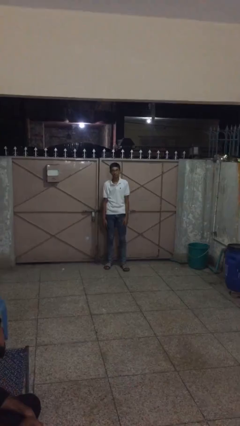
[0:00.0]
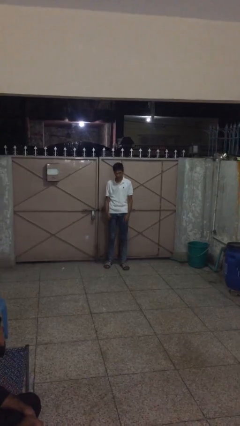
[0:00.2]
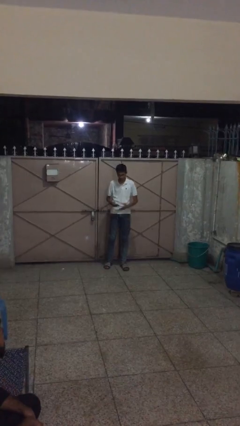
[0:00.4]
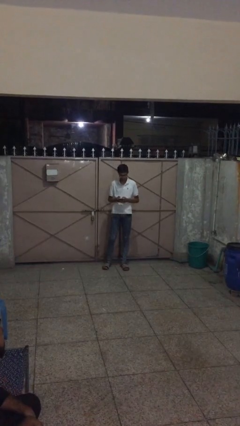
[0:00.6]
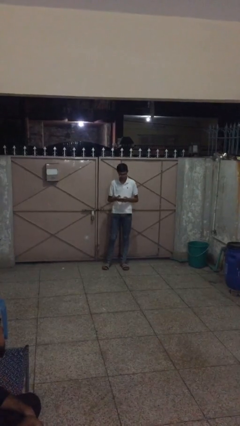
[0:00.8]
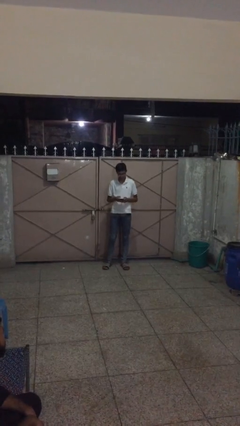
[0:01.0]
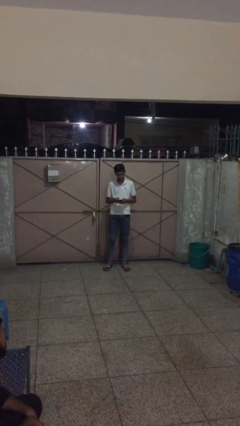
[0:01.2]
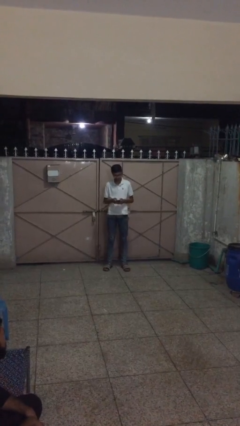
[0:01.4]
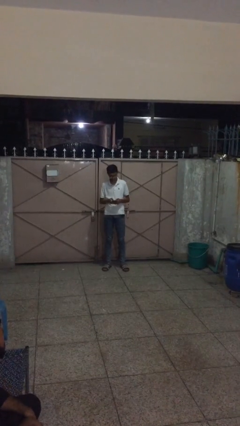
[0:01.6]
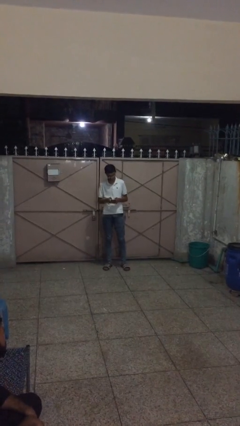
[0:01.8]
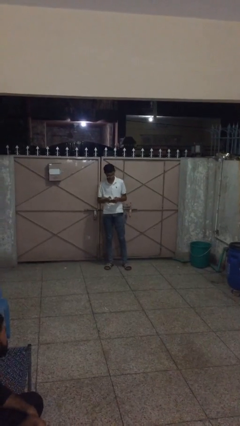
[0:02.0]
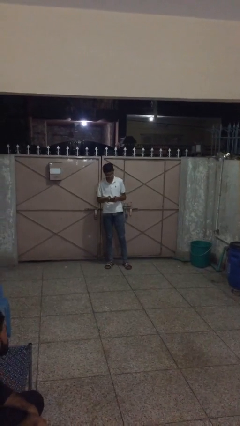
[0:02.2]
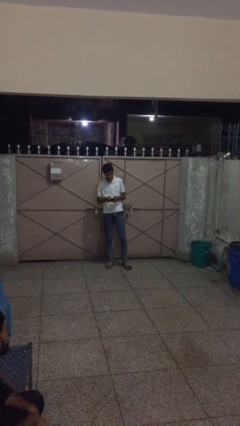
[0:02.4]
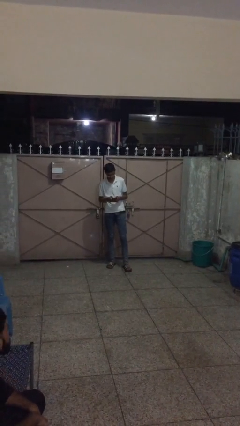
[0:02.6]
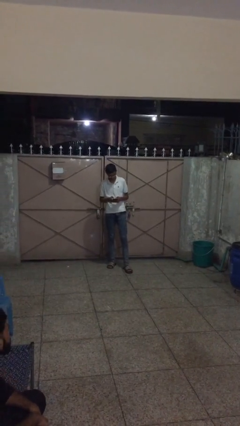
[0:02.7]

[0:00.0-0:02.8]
person texts on phone

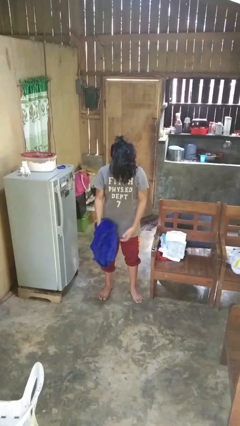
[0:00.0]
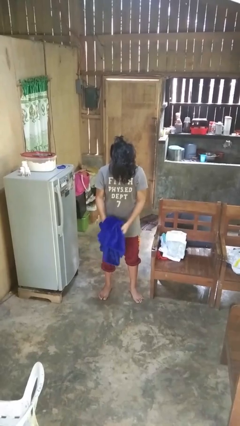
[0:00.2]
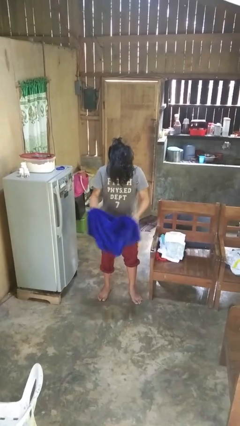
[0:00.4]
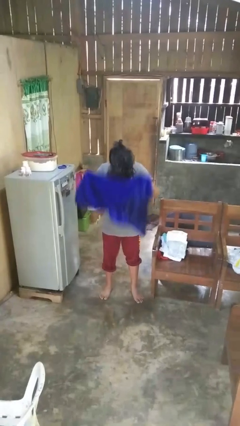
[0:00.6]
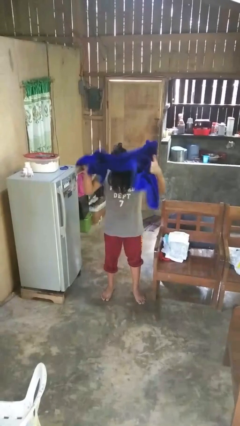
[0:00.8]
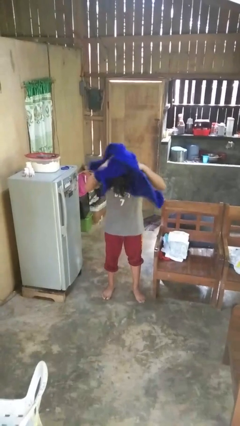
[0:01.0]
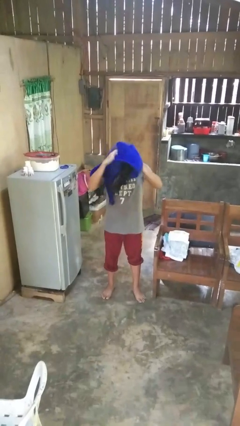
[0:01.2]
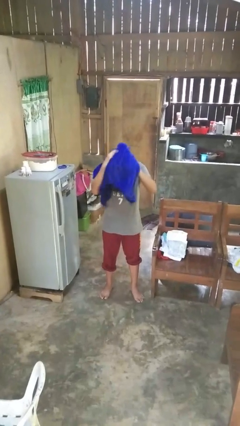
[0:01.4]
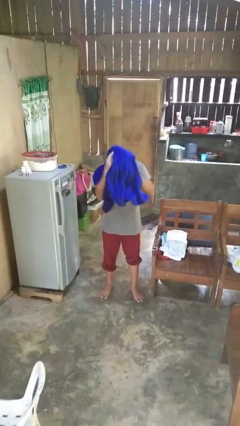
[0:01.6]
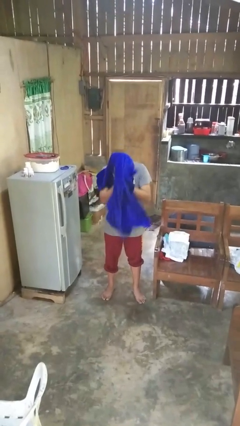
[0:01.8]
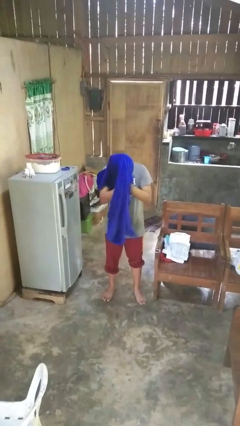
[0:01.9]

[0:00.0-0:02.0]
person dries hair with towel

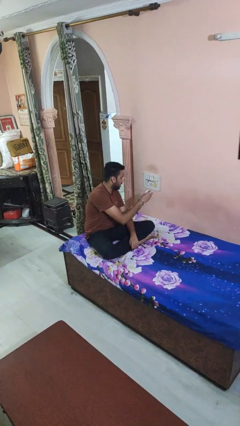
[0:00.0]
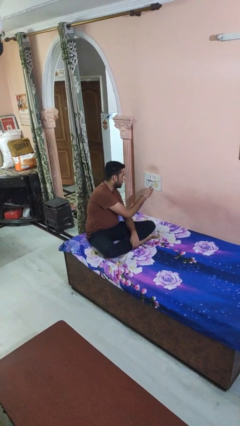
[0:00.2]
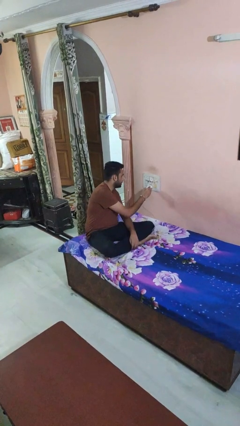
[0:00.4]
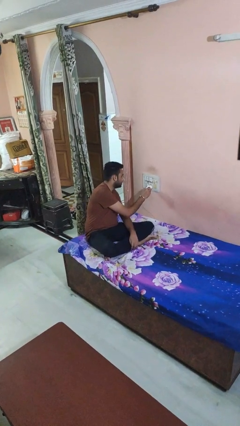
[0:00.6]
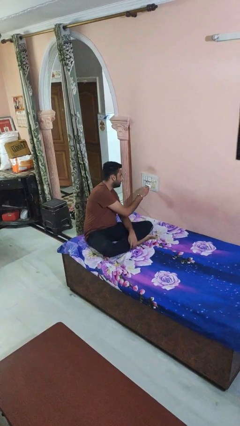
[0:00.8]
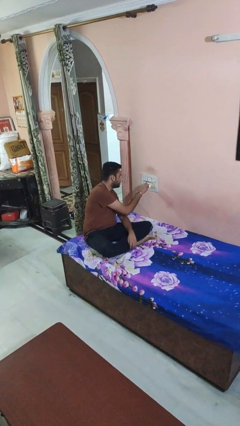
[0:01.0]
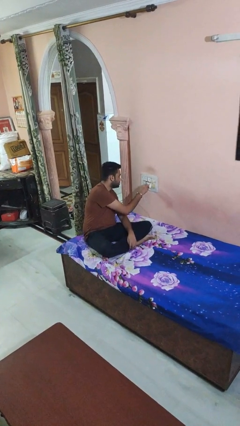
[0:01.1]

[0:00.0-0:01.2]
person plugs into electrical socket

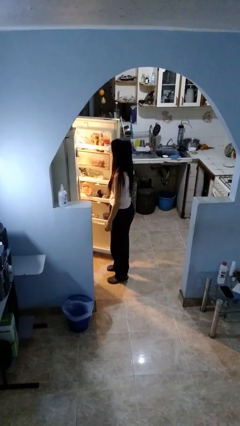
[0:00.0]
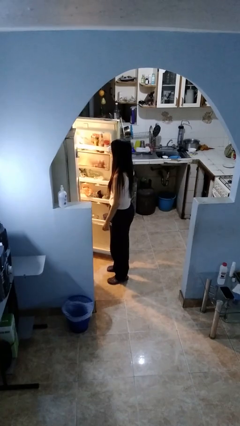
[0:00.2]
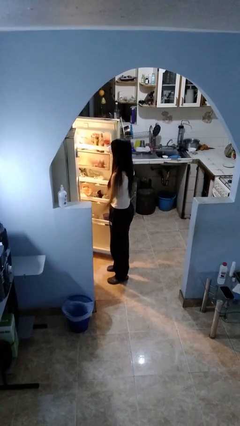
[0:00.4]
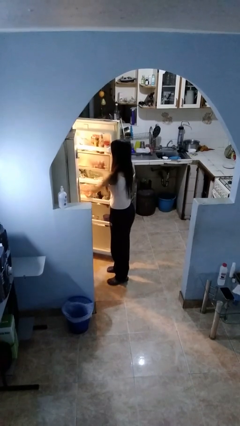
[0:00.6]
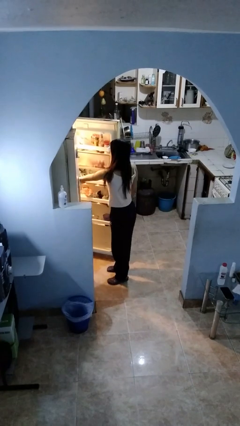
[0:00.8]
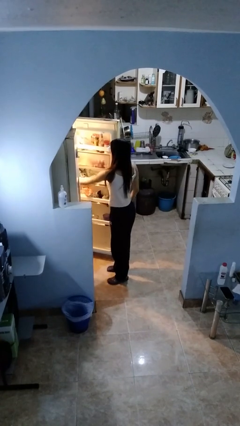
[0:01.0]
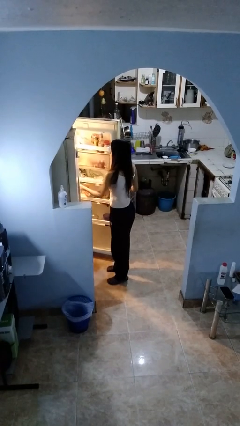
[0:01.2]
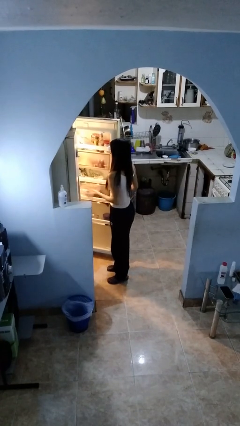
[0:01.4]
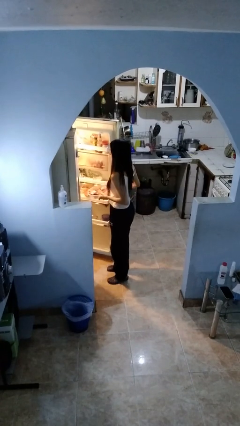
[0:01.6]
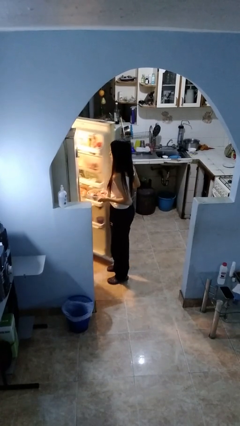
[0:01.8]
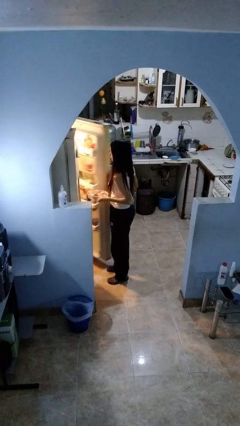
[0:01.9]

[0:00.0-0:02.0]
person takes object from refrigerator

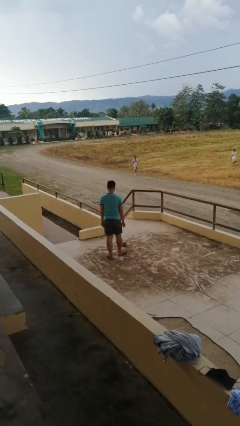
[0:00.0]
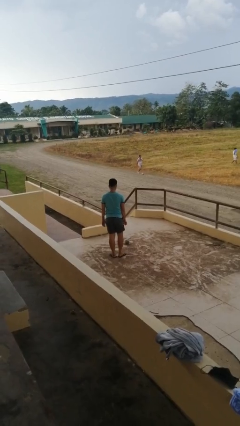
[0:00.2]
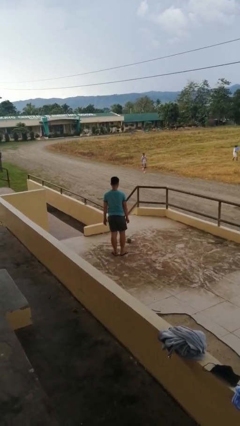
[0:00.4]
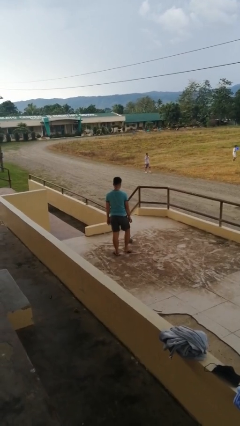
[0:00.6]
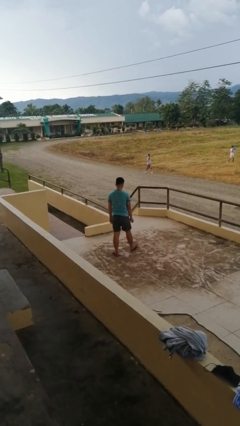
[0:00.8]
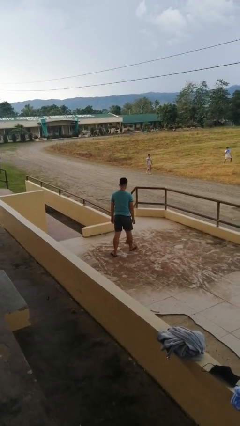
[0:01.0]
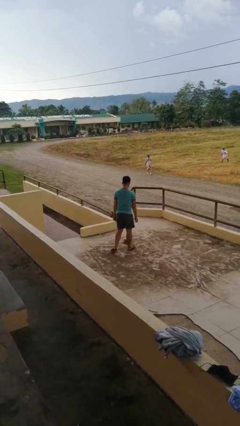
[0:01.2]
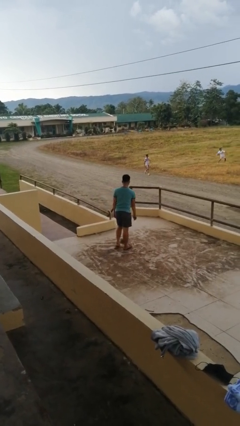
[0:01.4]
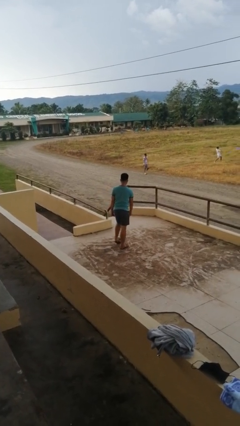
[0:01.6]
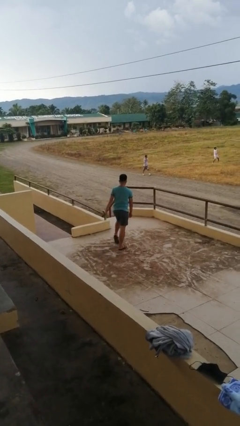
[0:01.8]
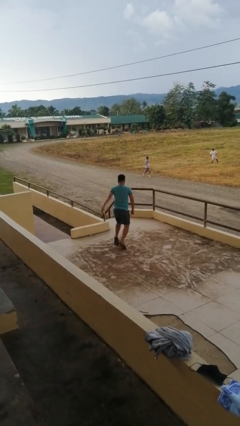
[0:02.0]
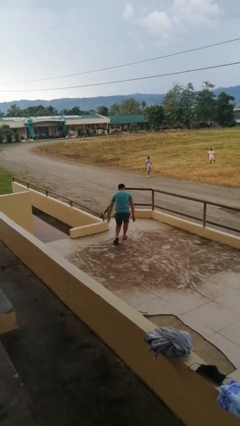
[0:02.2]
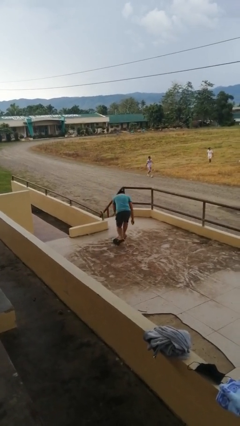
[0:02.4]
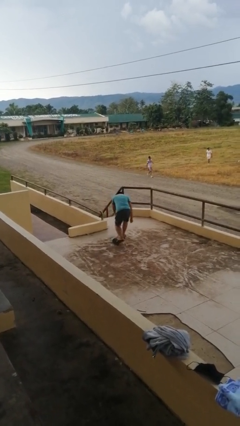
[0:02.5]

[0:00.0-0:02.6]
person trips on object on floor

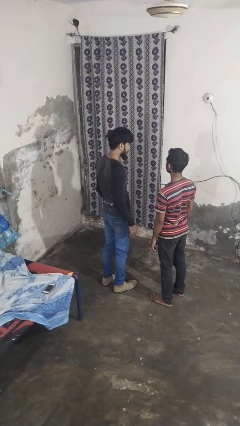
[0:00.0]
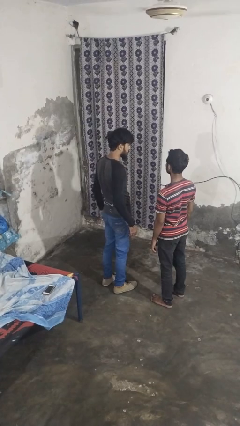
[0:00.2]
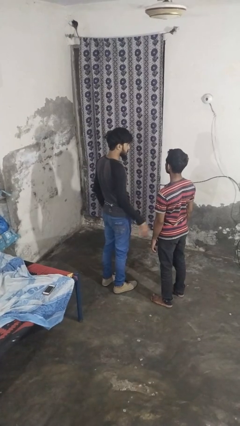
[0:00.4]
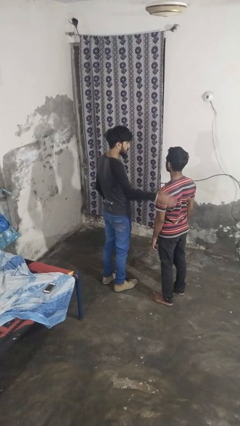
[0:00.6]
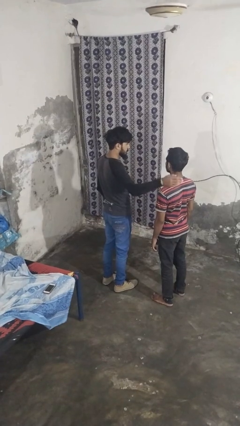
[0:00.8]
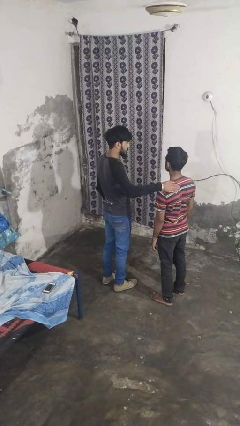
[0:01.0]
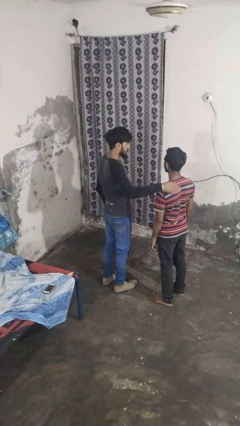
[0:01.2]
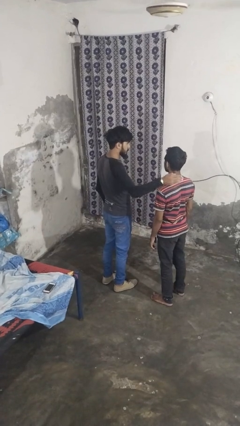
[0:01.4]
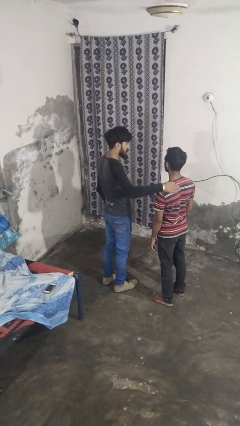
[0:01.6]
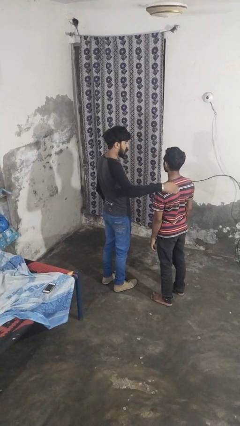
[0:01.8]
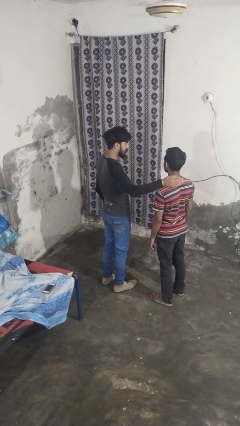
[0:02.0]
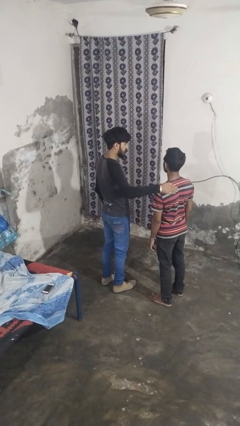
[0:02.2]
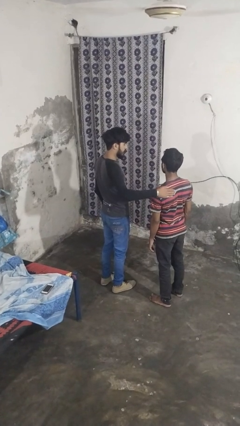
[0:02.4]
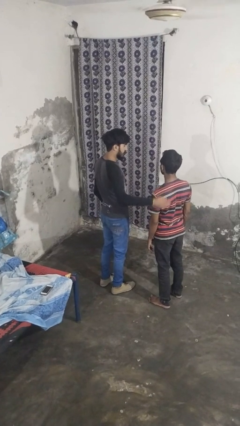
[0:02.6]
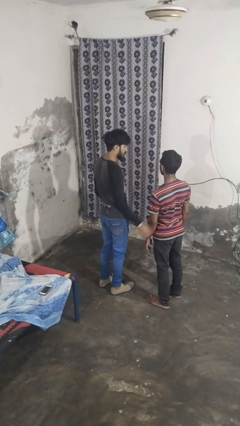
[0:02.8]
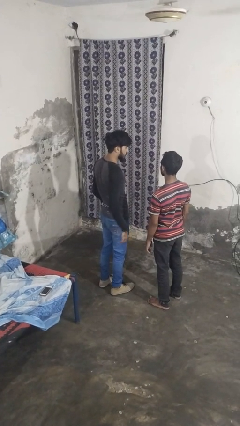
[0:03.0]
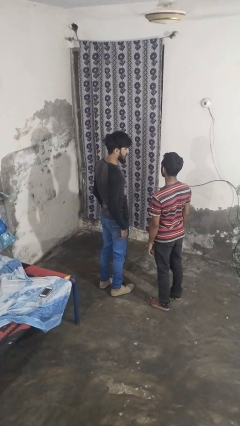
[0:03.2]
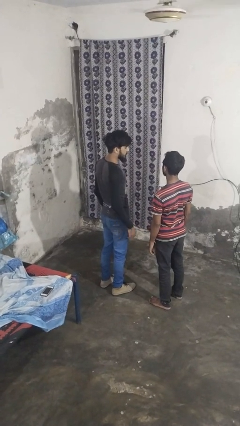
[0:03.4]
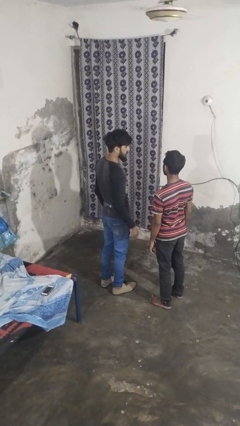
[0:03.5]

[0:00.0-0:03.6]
person pounds shoulders of person

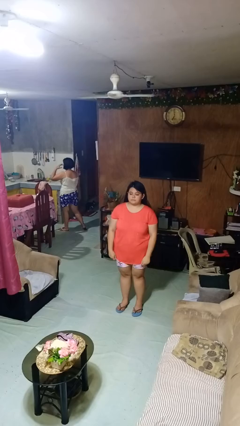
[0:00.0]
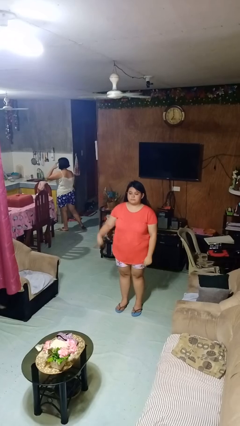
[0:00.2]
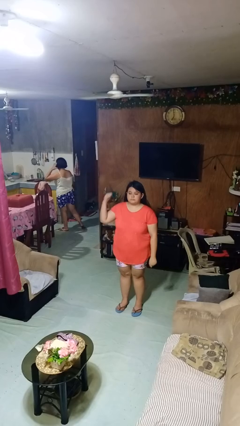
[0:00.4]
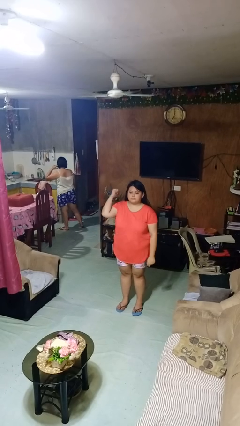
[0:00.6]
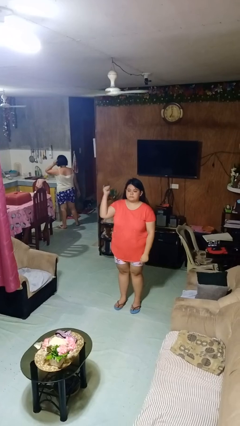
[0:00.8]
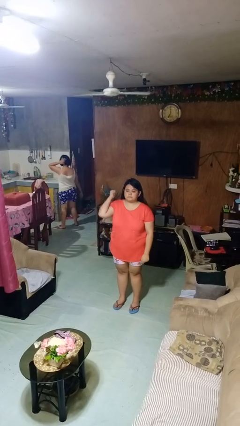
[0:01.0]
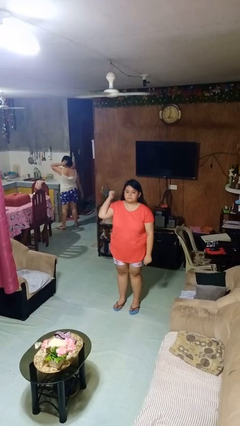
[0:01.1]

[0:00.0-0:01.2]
person gestures behind me

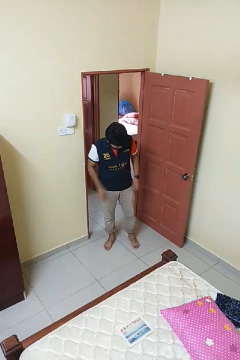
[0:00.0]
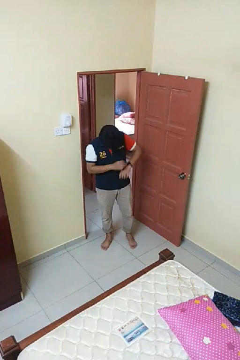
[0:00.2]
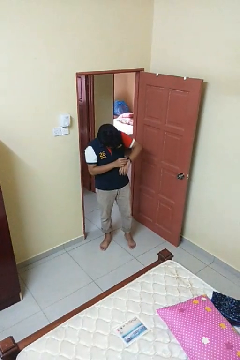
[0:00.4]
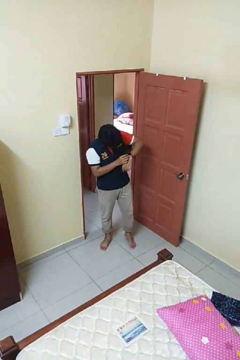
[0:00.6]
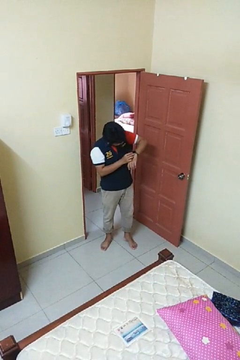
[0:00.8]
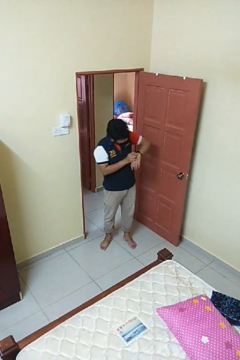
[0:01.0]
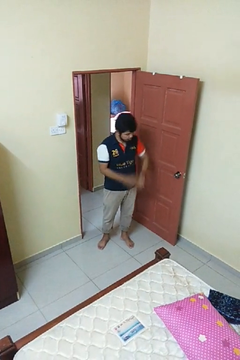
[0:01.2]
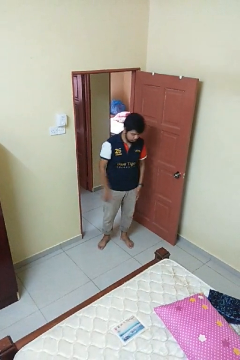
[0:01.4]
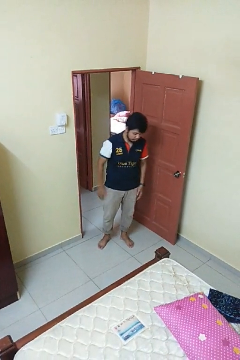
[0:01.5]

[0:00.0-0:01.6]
person looks at wristwatch
